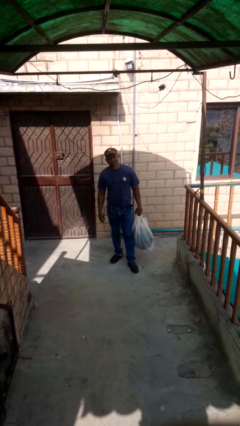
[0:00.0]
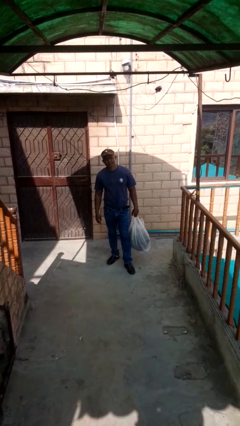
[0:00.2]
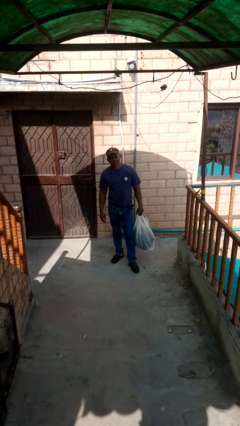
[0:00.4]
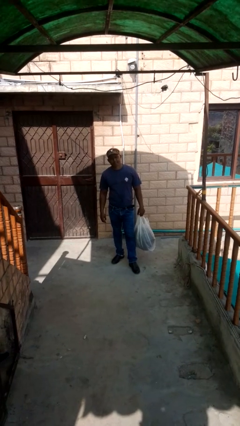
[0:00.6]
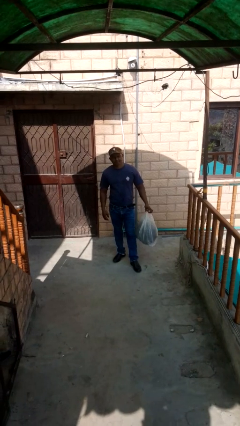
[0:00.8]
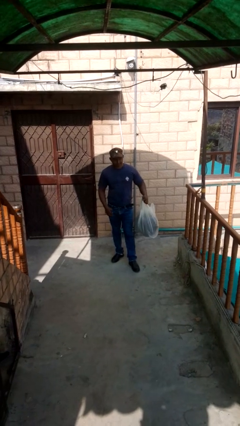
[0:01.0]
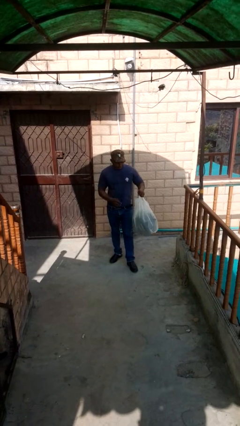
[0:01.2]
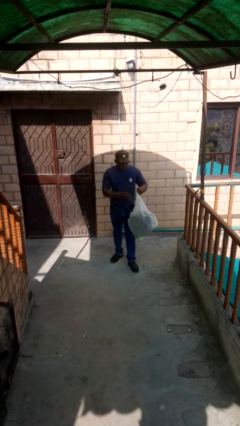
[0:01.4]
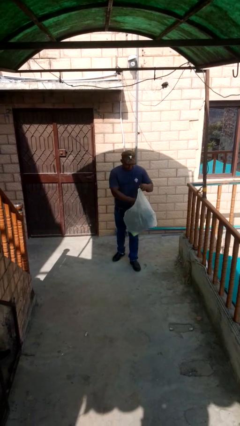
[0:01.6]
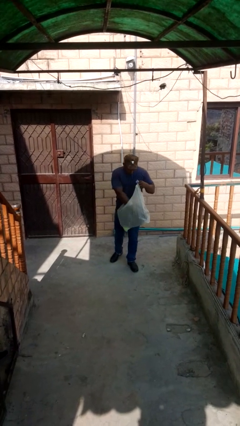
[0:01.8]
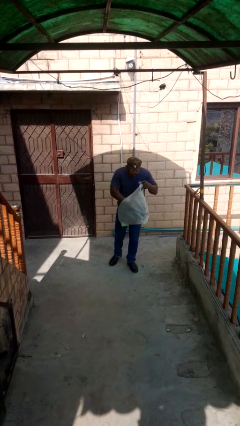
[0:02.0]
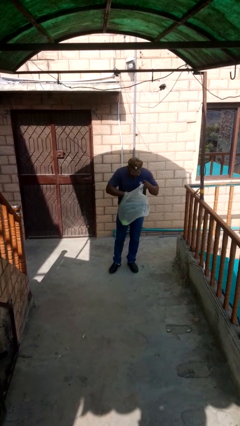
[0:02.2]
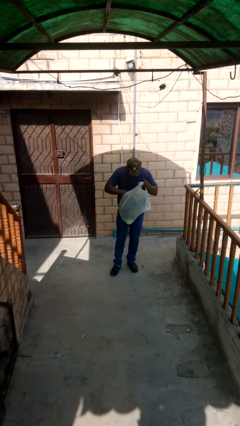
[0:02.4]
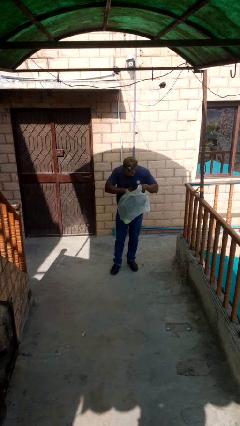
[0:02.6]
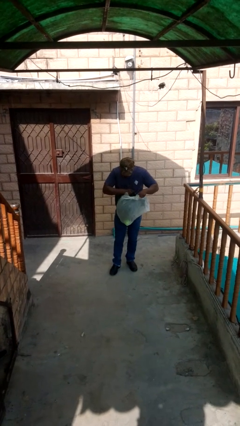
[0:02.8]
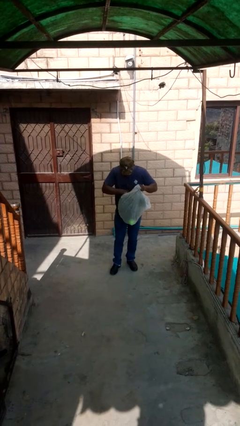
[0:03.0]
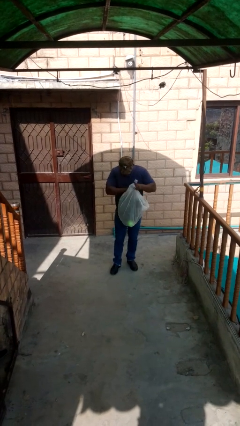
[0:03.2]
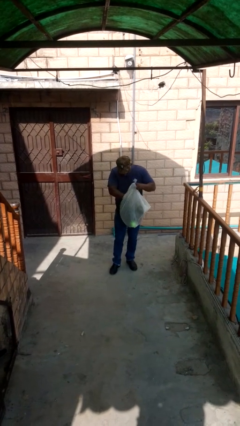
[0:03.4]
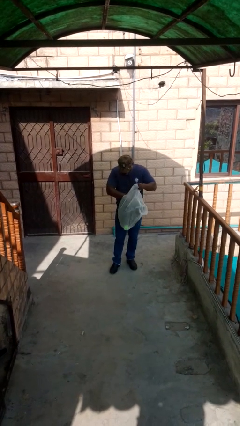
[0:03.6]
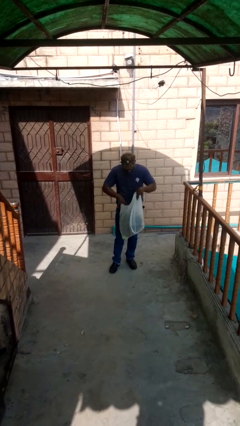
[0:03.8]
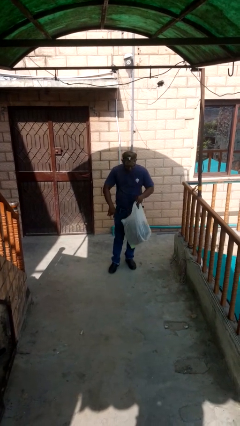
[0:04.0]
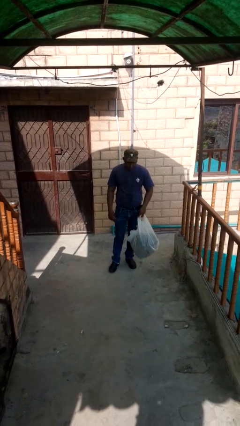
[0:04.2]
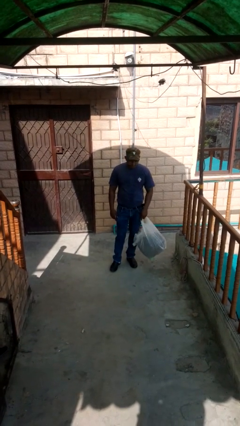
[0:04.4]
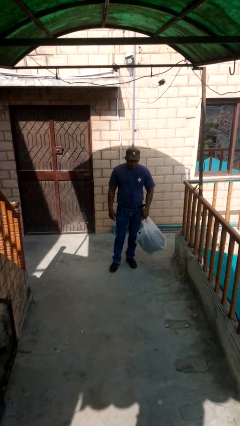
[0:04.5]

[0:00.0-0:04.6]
person searches in bag

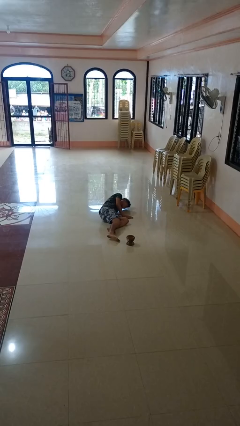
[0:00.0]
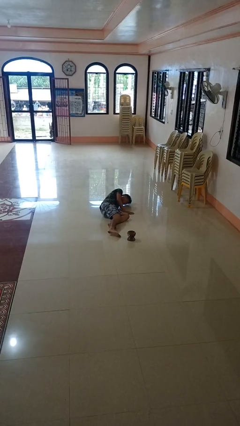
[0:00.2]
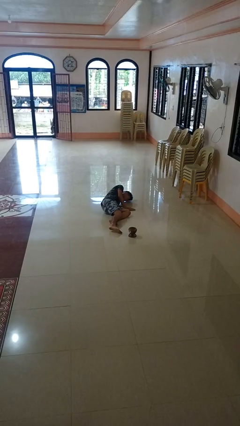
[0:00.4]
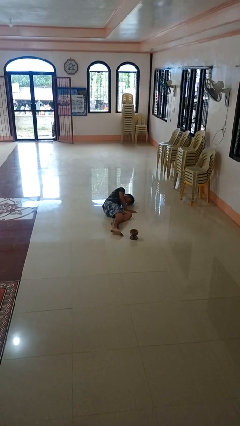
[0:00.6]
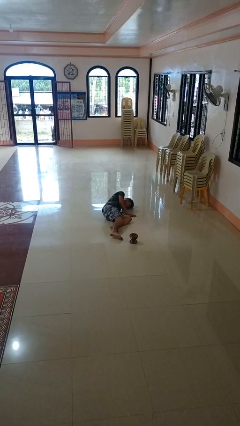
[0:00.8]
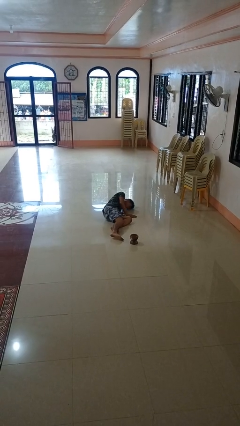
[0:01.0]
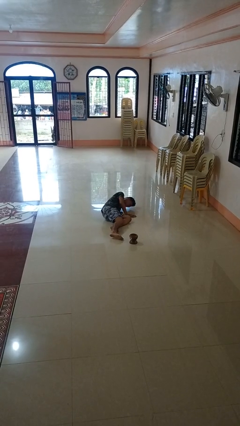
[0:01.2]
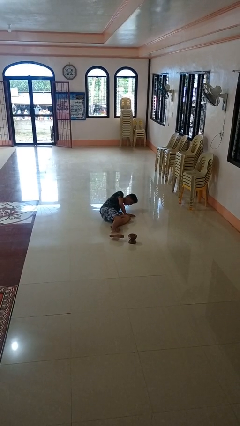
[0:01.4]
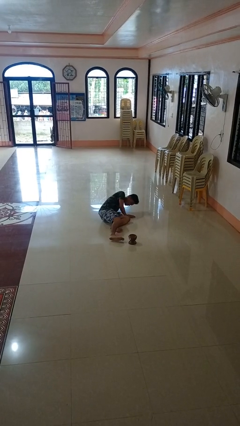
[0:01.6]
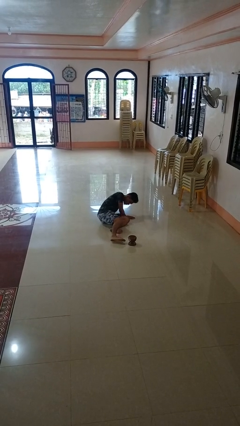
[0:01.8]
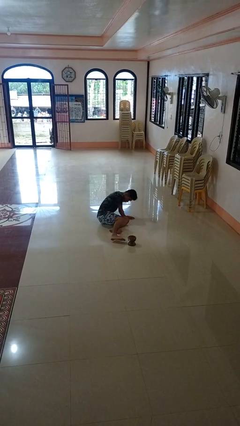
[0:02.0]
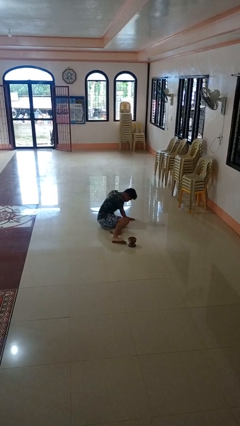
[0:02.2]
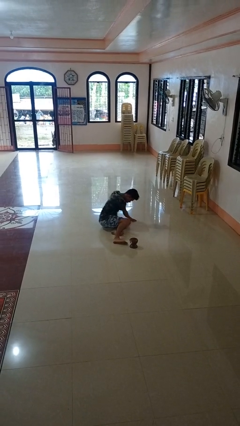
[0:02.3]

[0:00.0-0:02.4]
person lies down on floor

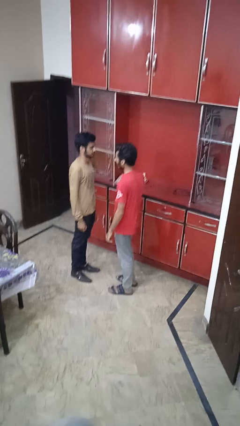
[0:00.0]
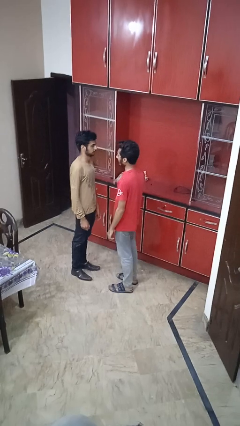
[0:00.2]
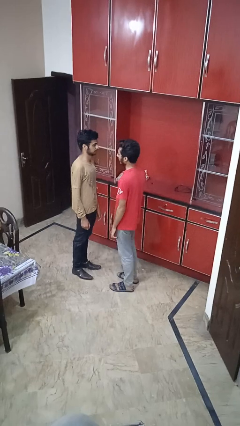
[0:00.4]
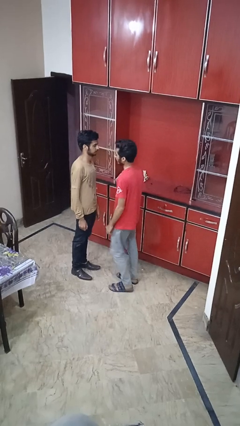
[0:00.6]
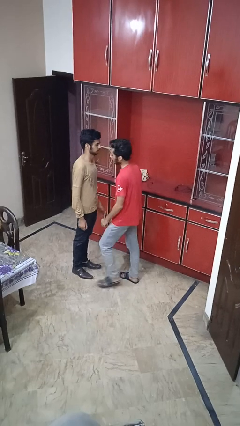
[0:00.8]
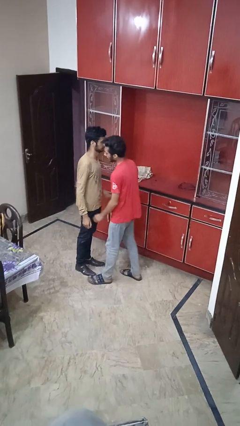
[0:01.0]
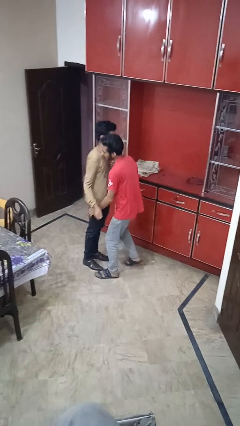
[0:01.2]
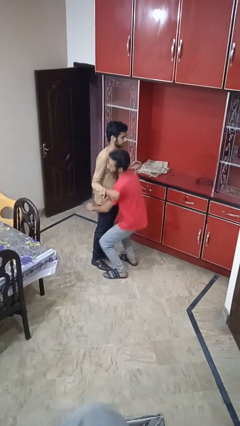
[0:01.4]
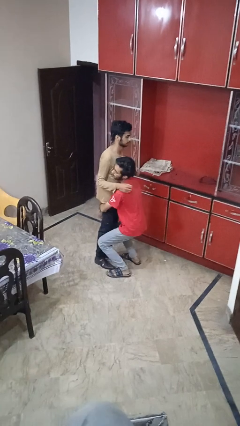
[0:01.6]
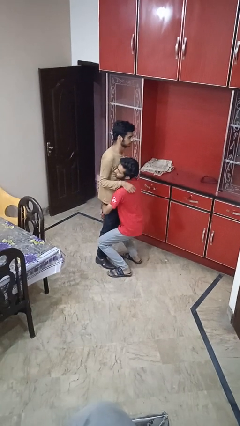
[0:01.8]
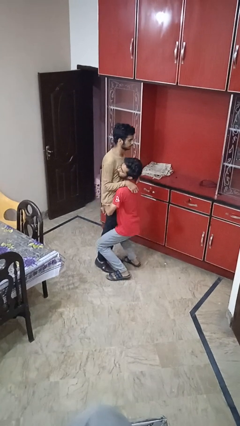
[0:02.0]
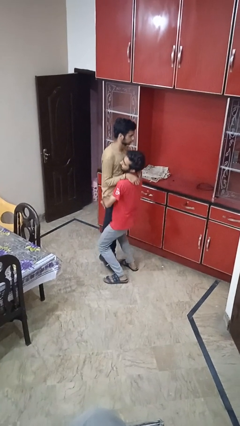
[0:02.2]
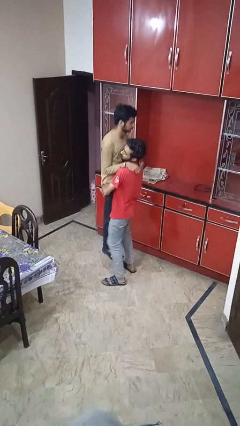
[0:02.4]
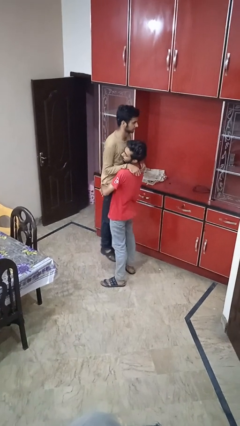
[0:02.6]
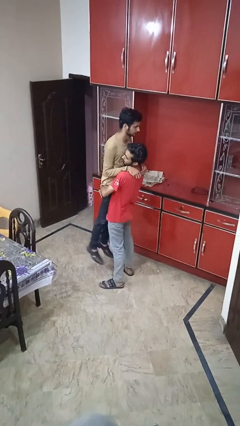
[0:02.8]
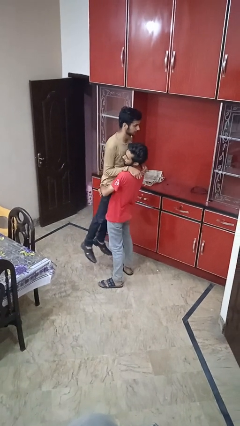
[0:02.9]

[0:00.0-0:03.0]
person picks up person

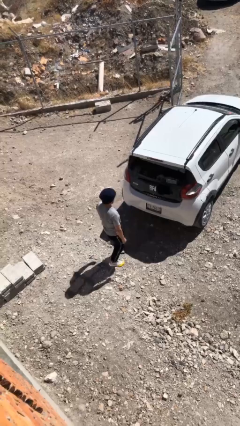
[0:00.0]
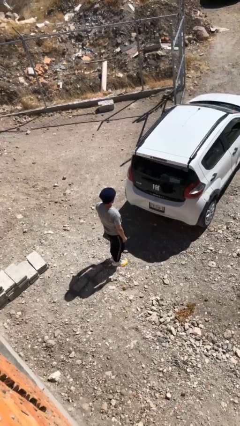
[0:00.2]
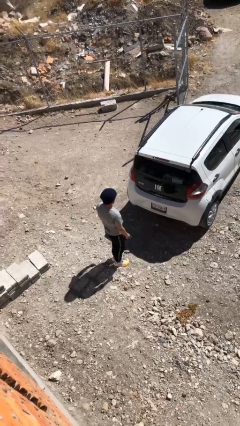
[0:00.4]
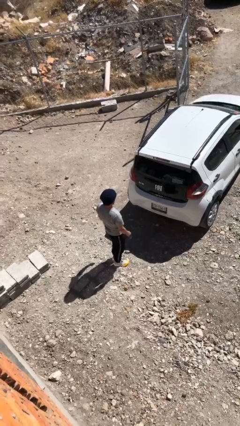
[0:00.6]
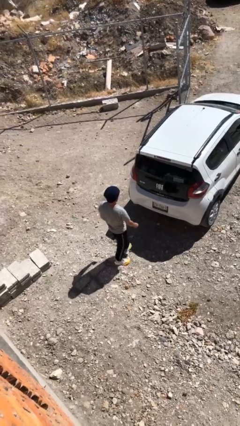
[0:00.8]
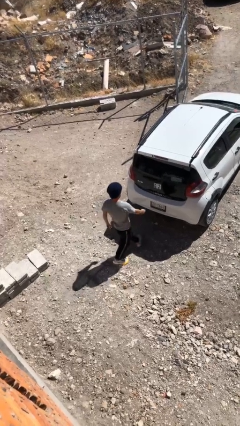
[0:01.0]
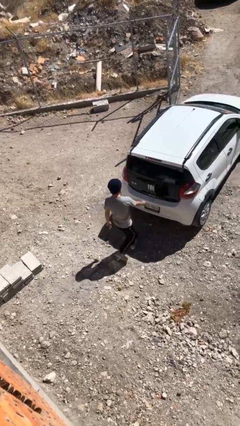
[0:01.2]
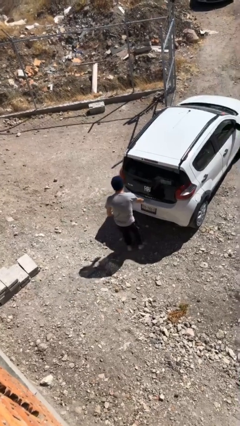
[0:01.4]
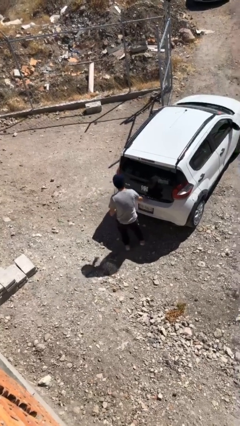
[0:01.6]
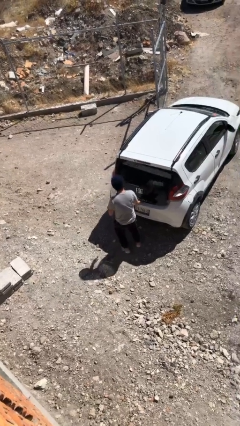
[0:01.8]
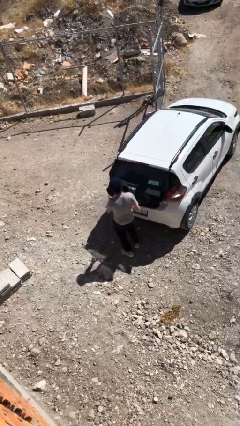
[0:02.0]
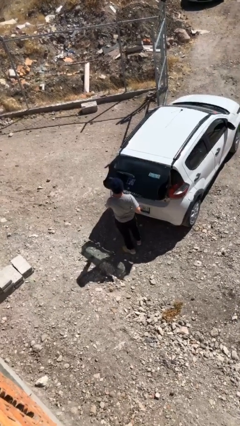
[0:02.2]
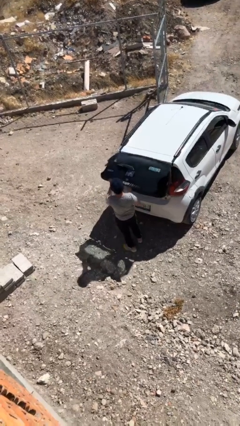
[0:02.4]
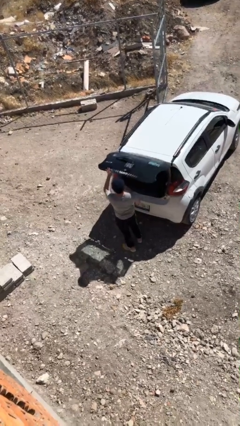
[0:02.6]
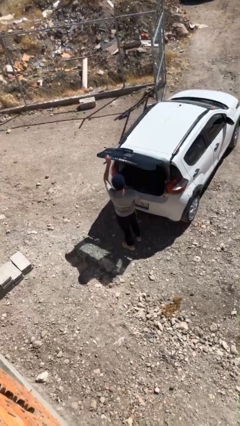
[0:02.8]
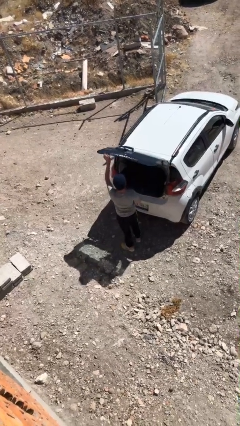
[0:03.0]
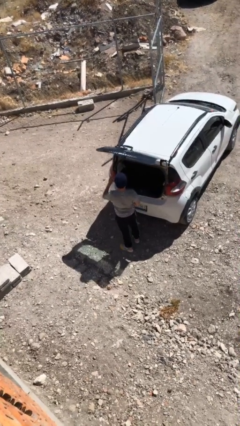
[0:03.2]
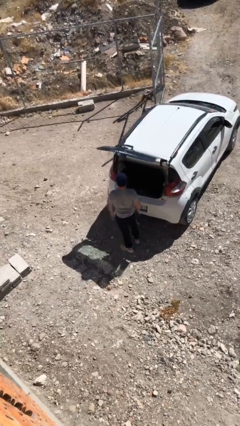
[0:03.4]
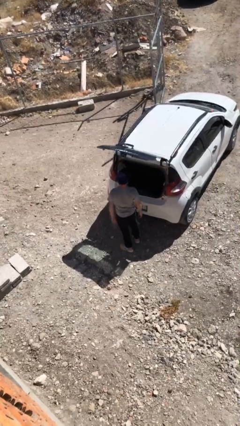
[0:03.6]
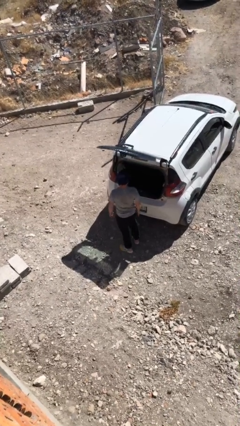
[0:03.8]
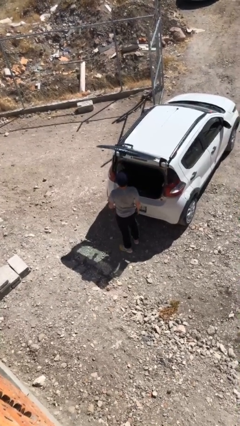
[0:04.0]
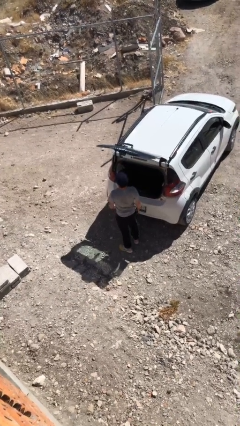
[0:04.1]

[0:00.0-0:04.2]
person opens car trunk

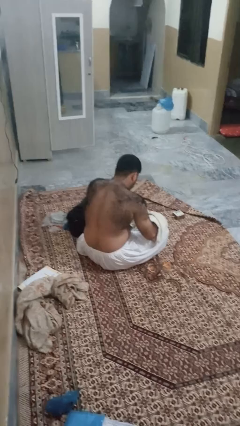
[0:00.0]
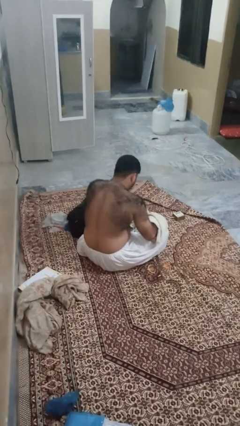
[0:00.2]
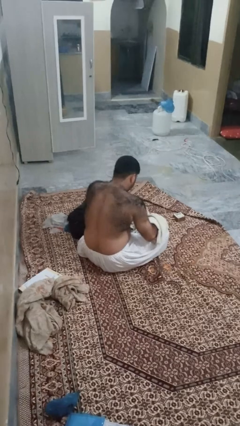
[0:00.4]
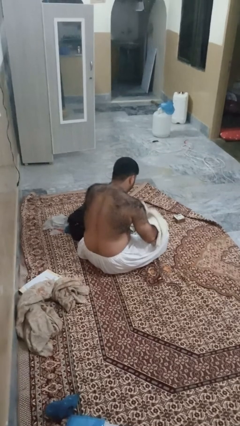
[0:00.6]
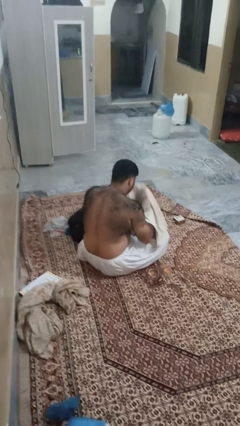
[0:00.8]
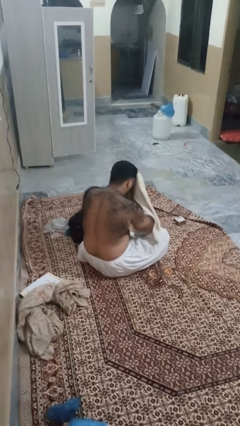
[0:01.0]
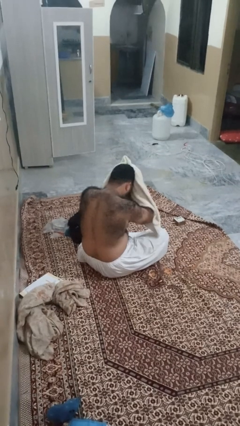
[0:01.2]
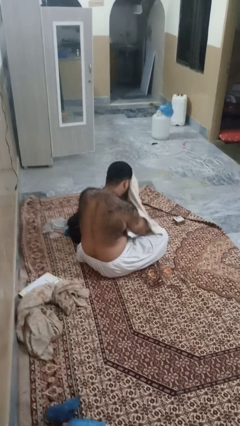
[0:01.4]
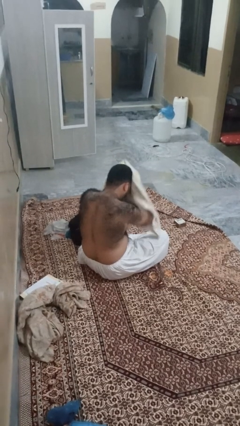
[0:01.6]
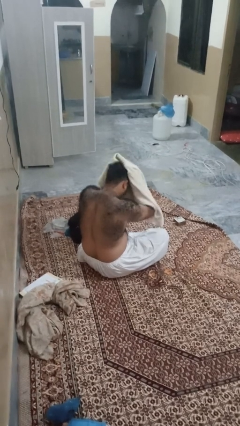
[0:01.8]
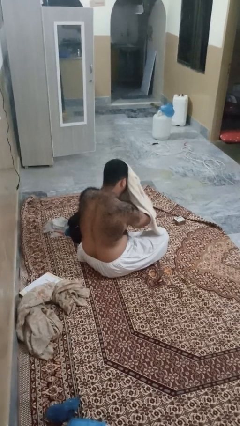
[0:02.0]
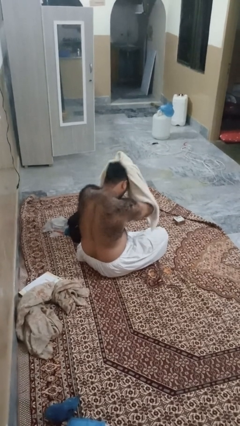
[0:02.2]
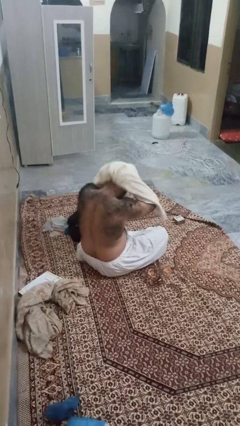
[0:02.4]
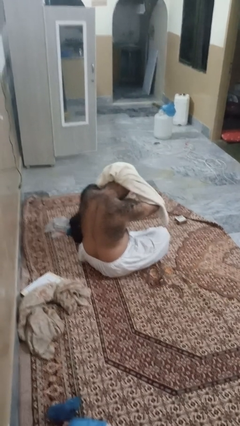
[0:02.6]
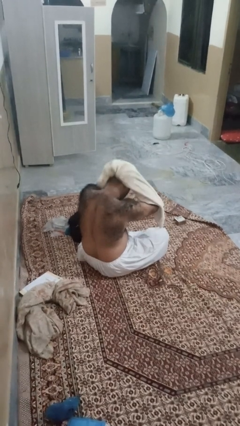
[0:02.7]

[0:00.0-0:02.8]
person dries hair with towel

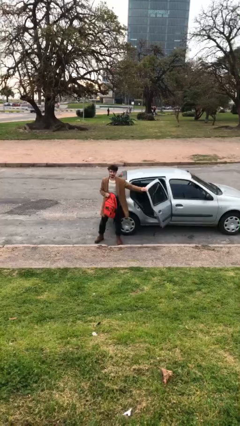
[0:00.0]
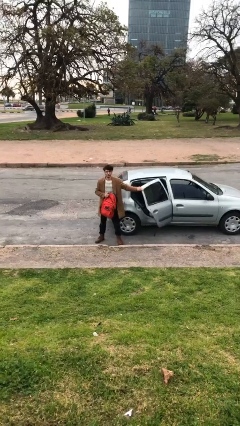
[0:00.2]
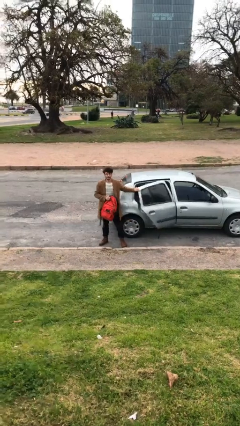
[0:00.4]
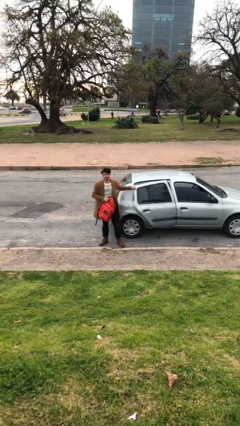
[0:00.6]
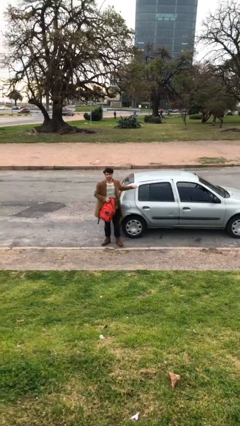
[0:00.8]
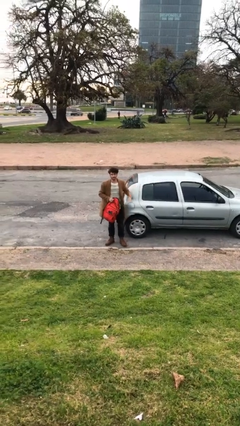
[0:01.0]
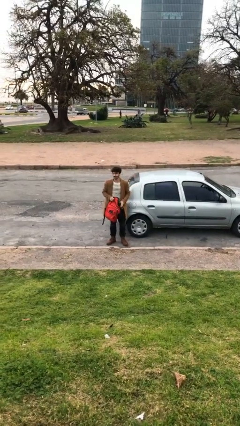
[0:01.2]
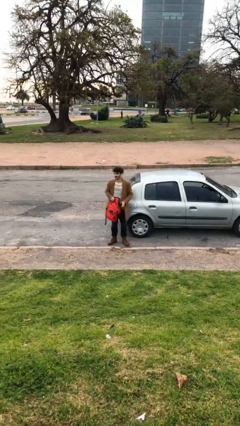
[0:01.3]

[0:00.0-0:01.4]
person closes car door
